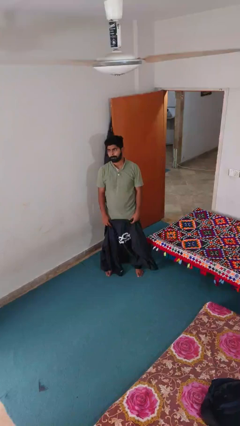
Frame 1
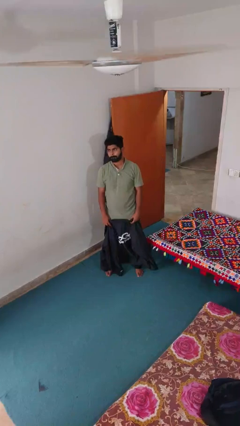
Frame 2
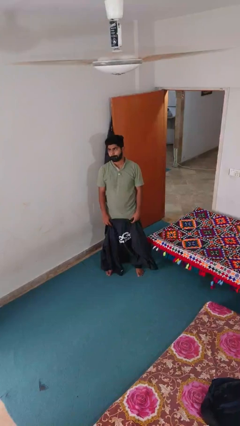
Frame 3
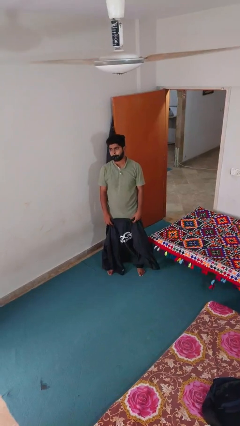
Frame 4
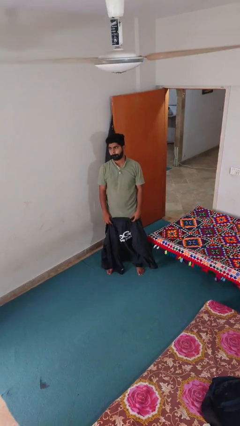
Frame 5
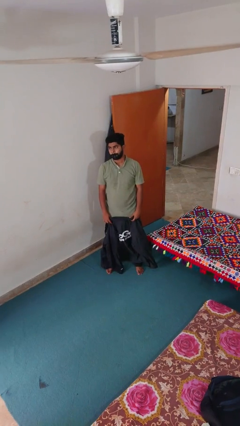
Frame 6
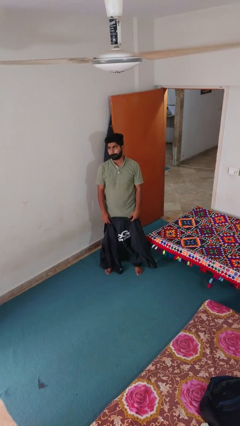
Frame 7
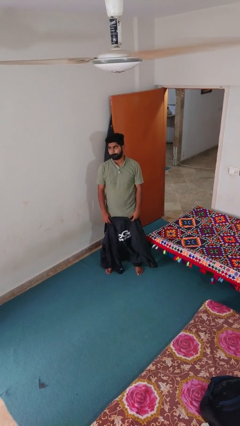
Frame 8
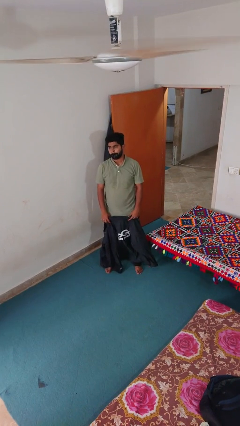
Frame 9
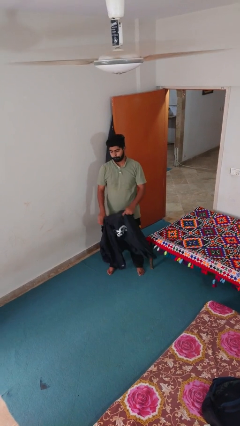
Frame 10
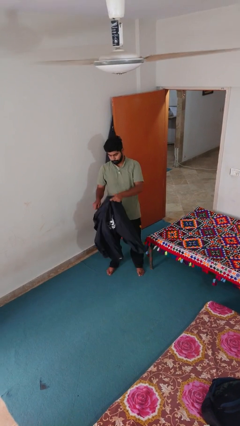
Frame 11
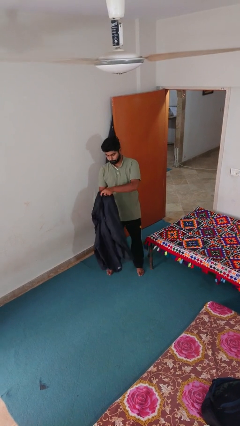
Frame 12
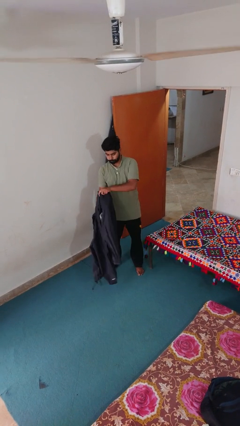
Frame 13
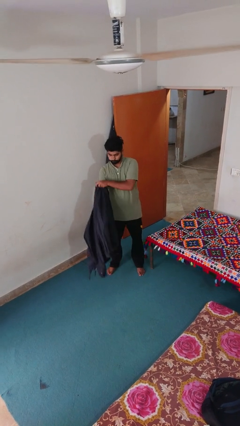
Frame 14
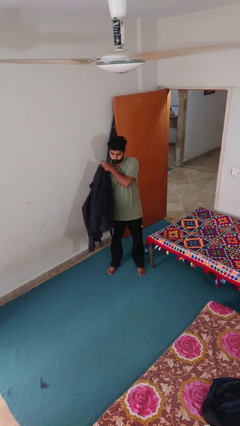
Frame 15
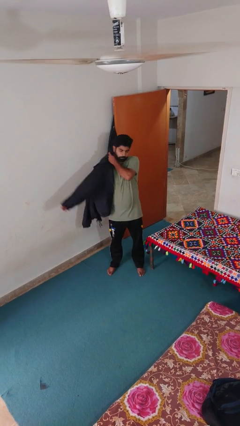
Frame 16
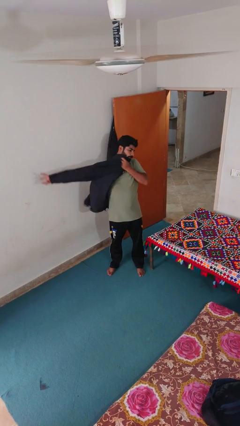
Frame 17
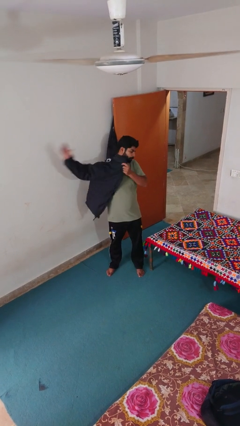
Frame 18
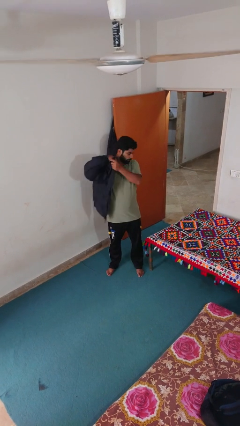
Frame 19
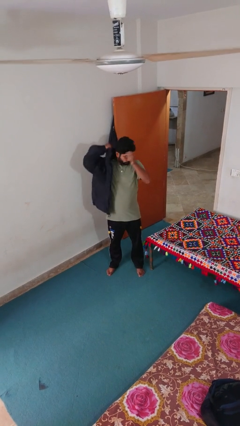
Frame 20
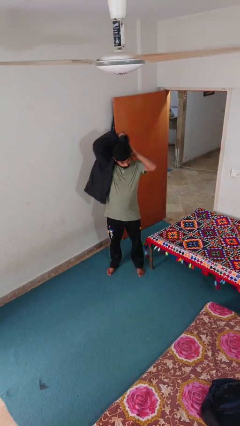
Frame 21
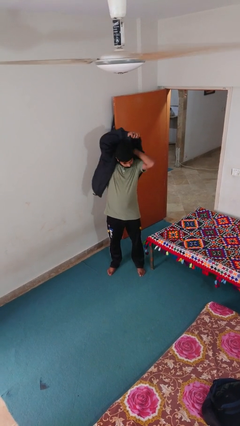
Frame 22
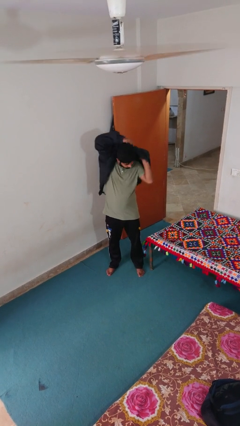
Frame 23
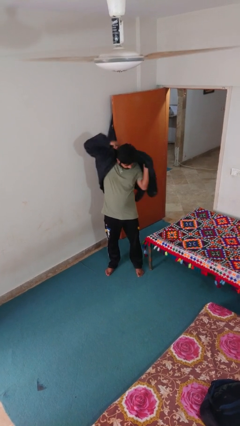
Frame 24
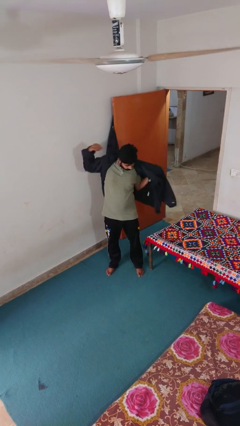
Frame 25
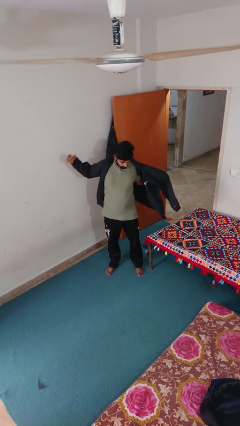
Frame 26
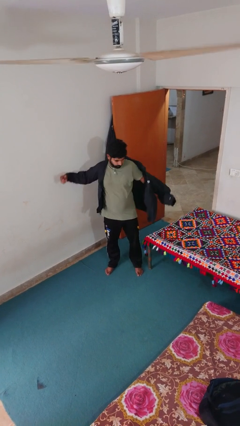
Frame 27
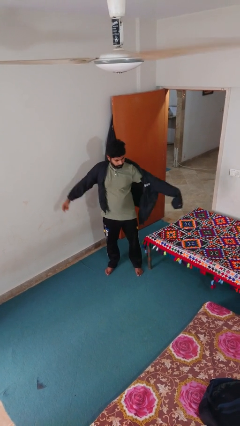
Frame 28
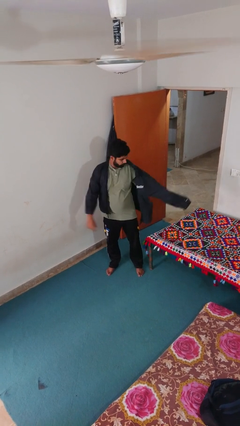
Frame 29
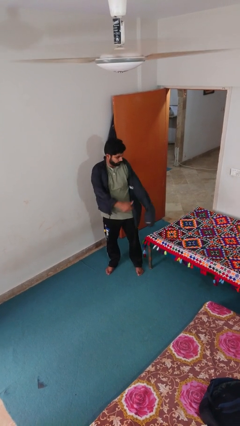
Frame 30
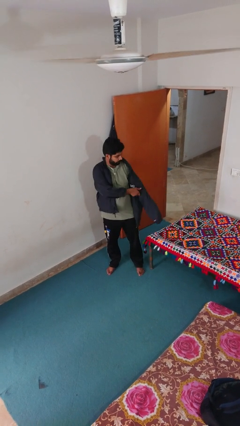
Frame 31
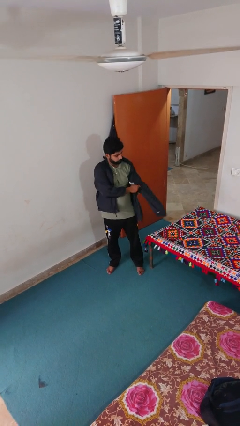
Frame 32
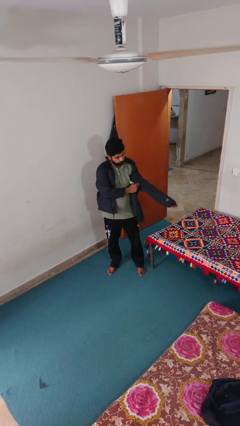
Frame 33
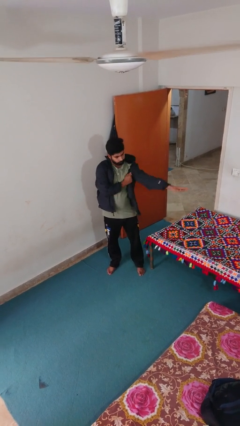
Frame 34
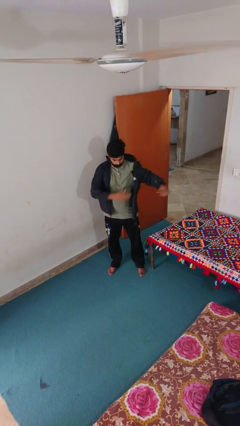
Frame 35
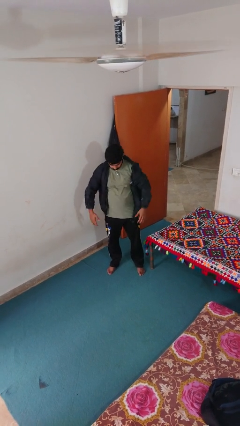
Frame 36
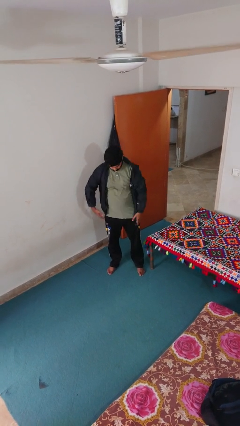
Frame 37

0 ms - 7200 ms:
person puts on jacket

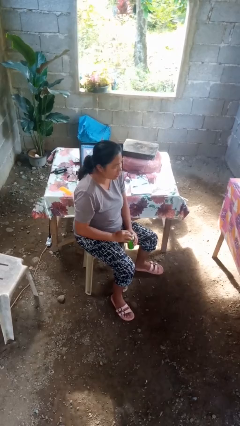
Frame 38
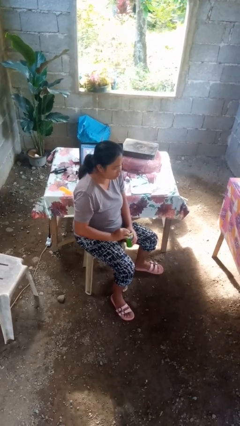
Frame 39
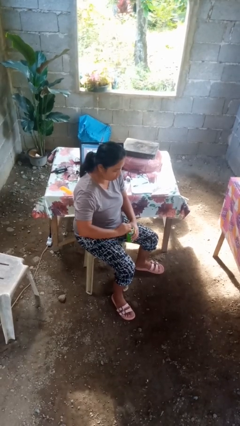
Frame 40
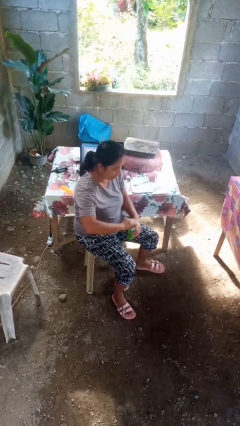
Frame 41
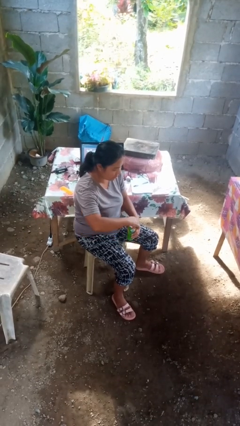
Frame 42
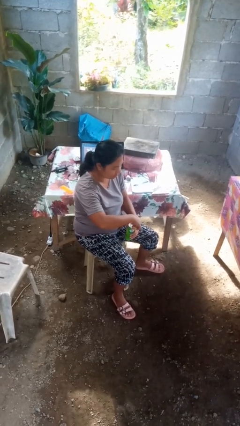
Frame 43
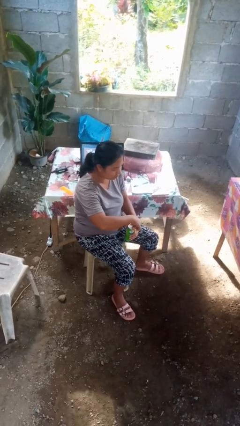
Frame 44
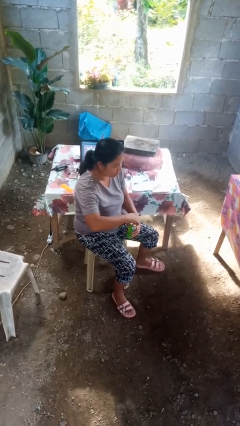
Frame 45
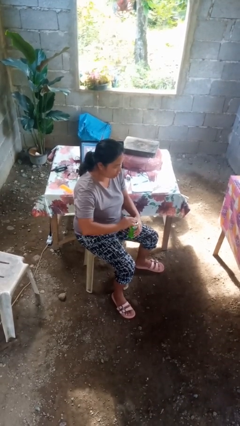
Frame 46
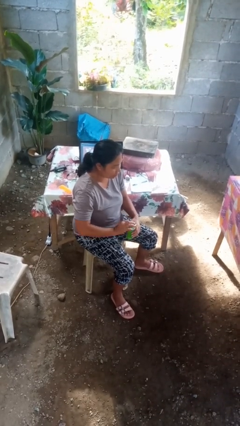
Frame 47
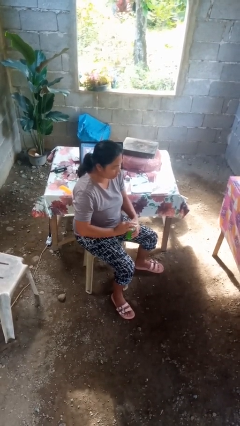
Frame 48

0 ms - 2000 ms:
person opens beverage can

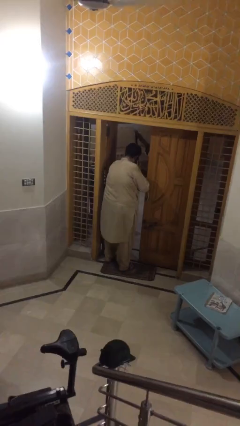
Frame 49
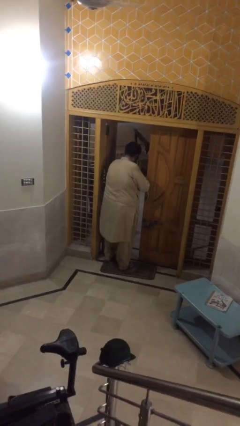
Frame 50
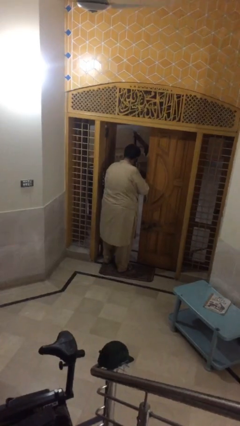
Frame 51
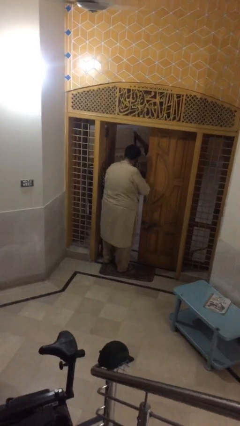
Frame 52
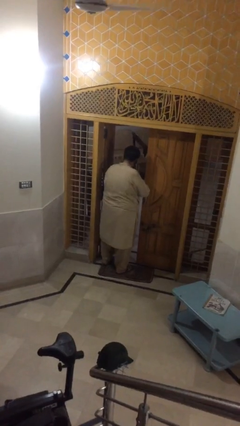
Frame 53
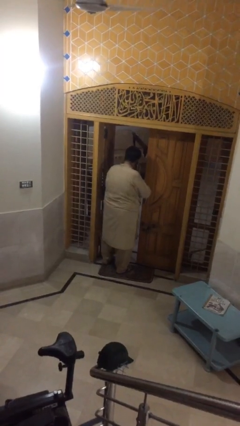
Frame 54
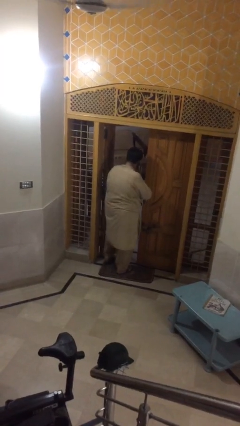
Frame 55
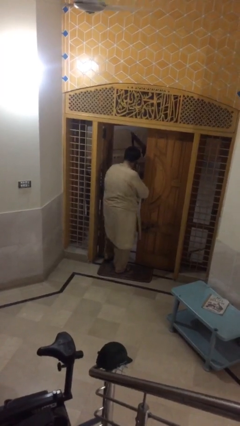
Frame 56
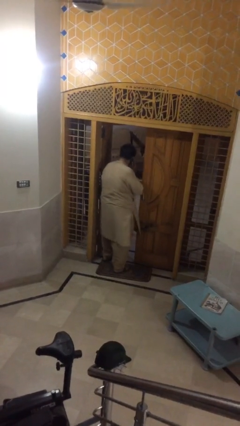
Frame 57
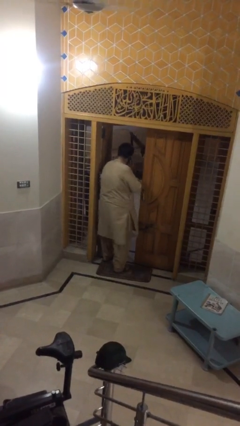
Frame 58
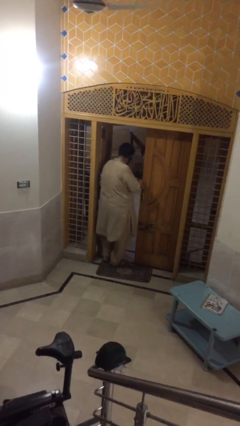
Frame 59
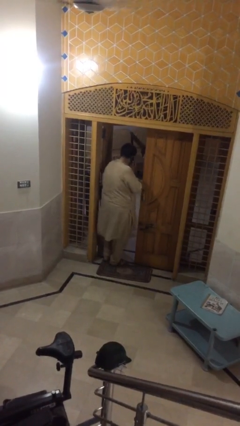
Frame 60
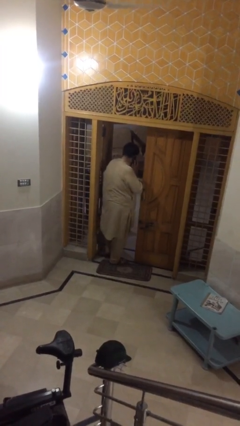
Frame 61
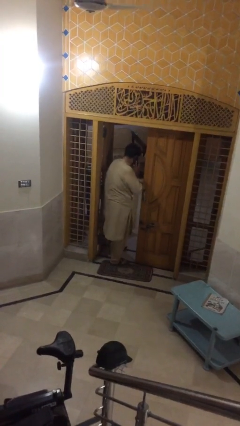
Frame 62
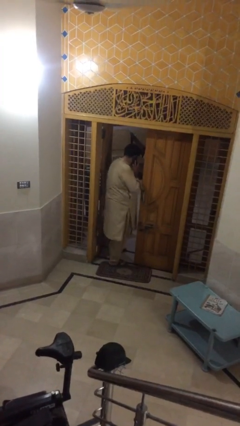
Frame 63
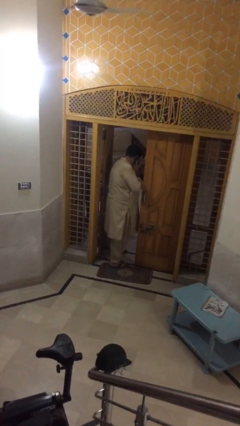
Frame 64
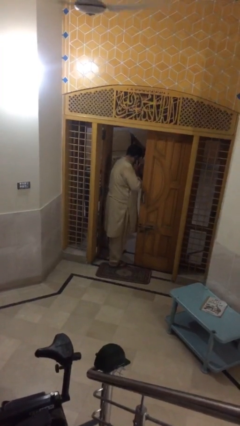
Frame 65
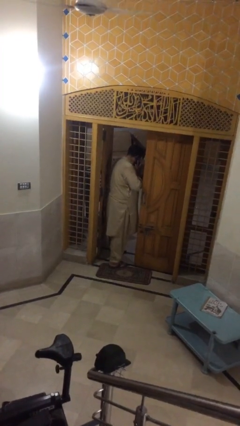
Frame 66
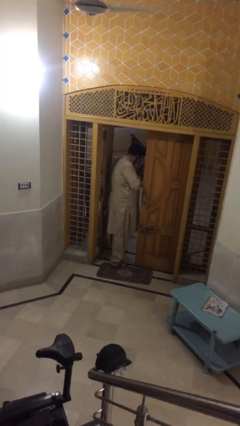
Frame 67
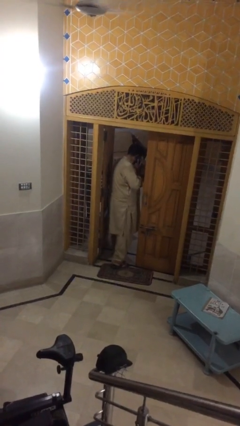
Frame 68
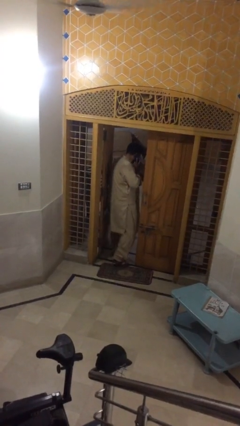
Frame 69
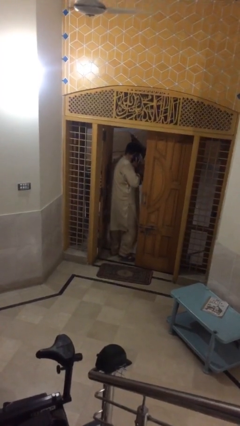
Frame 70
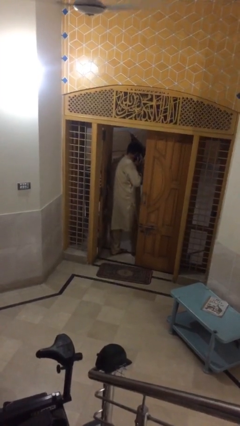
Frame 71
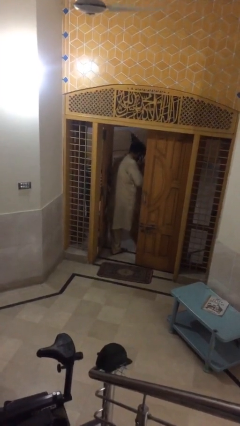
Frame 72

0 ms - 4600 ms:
person exits scene through structure

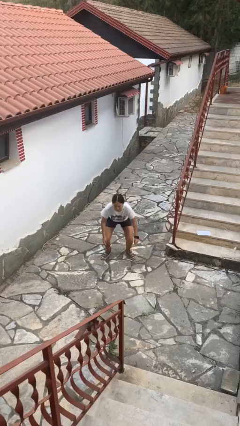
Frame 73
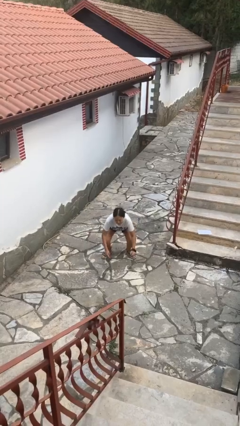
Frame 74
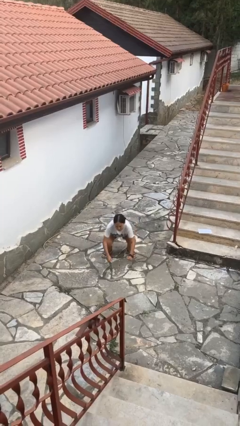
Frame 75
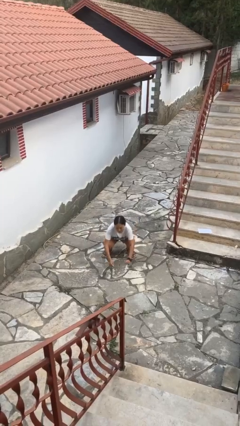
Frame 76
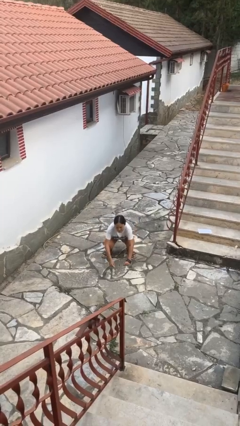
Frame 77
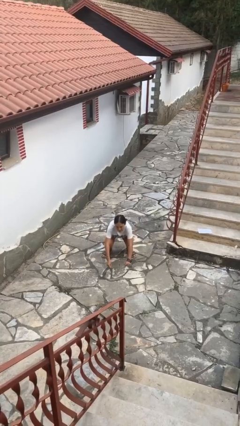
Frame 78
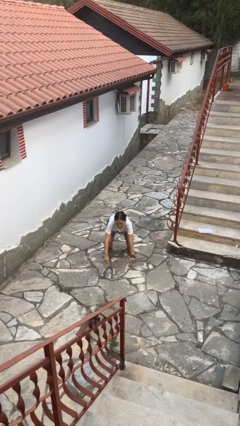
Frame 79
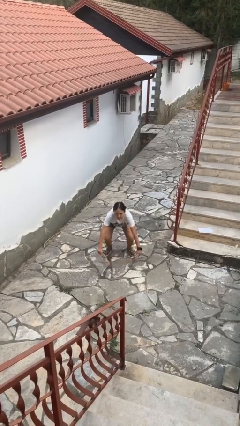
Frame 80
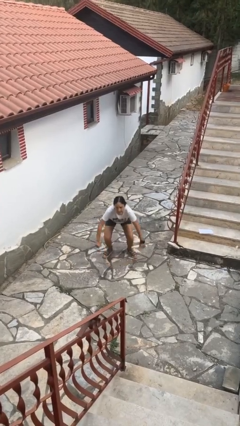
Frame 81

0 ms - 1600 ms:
person squats

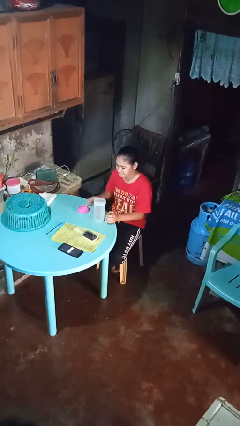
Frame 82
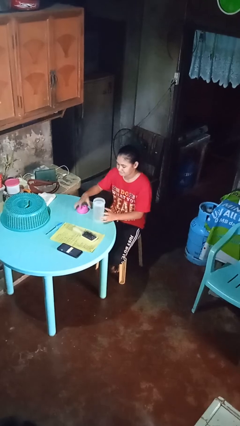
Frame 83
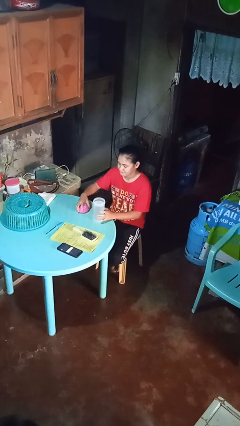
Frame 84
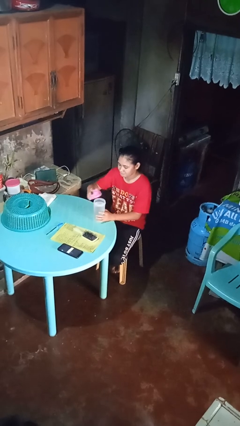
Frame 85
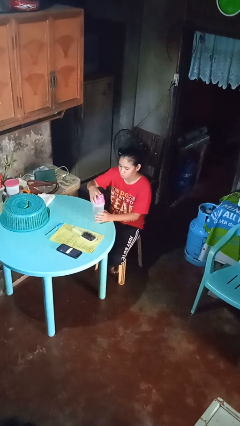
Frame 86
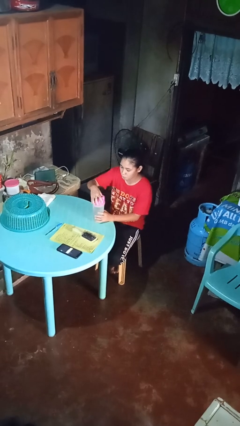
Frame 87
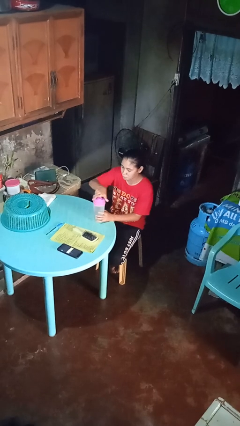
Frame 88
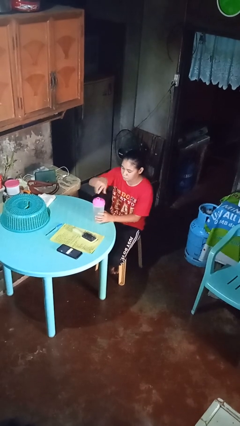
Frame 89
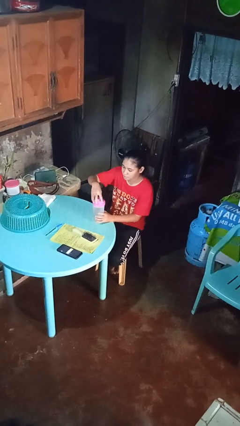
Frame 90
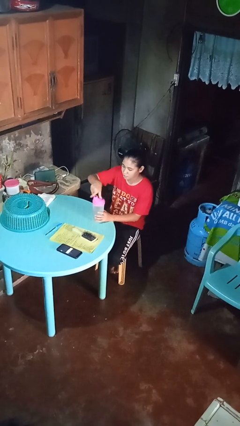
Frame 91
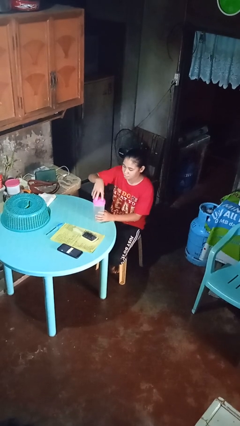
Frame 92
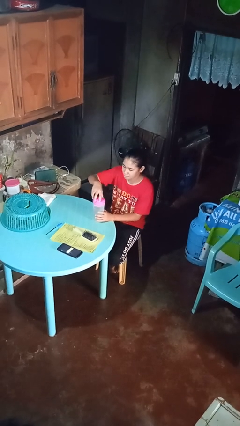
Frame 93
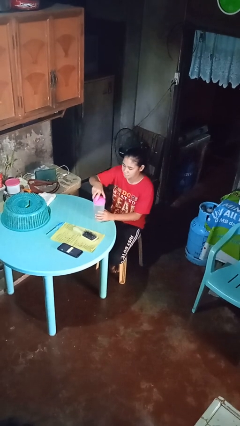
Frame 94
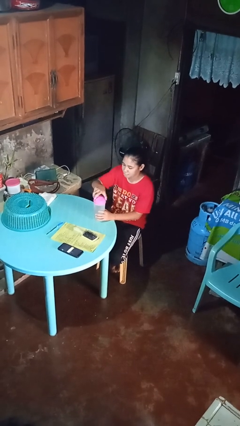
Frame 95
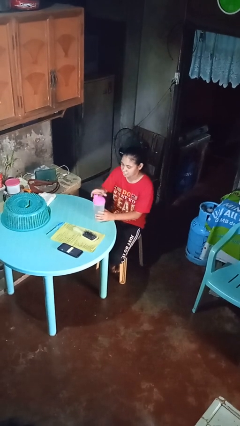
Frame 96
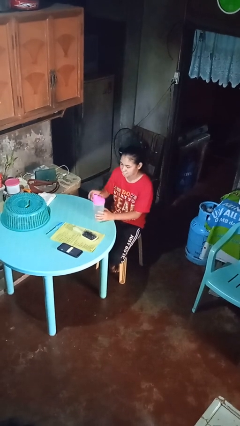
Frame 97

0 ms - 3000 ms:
person screws lid to bottle
